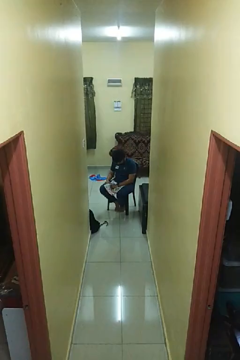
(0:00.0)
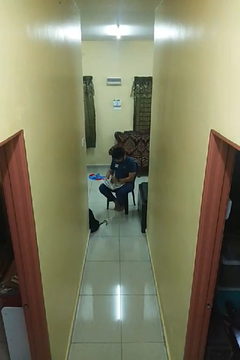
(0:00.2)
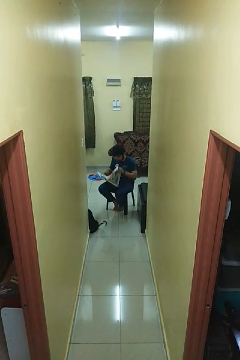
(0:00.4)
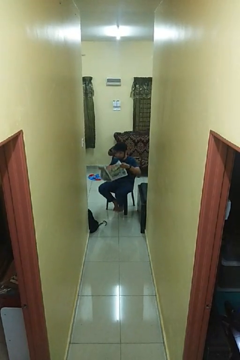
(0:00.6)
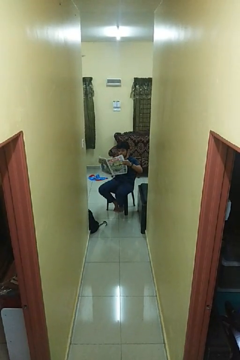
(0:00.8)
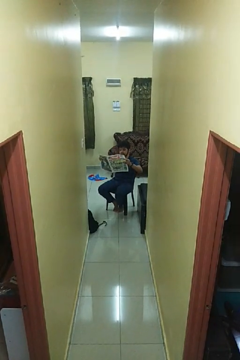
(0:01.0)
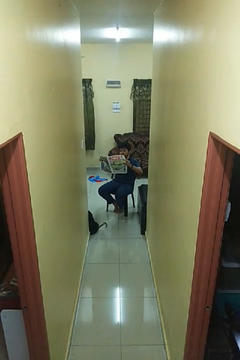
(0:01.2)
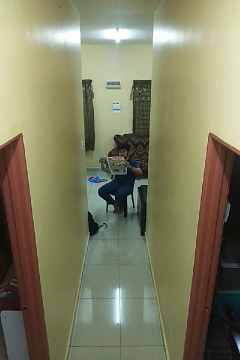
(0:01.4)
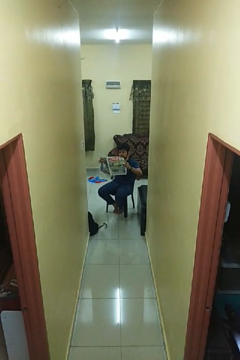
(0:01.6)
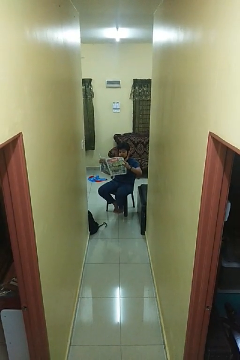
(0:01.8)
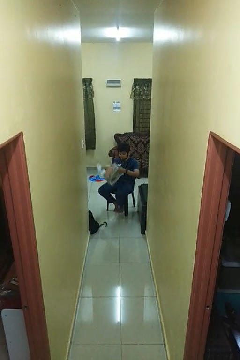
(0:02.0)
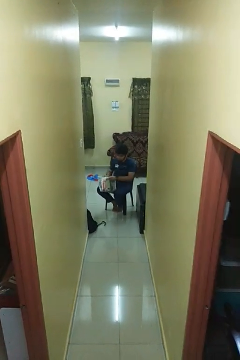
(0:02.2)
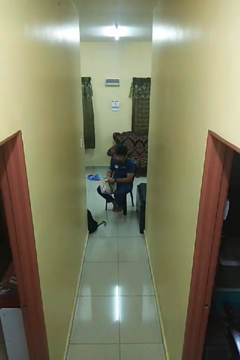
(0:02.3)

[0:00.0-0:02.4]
person reads newspaper

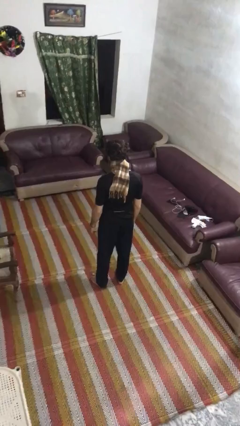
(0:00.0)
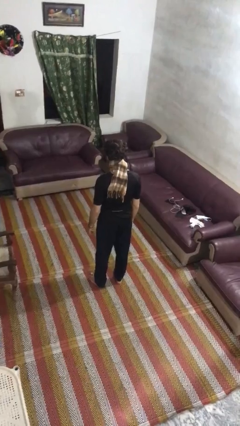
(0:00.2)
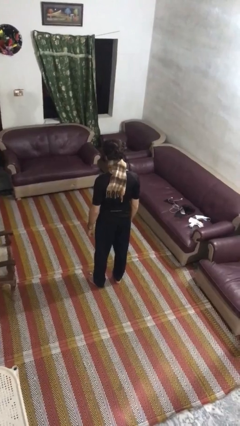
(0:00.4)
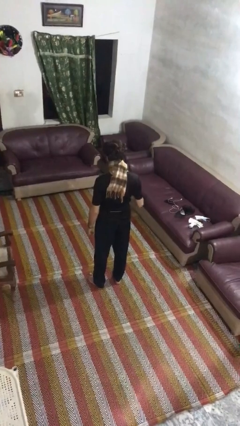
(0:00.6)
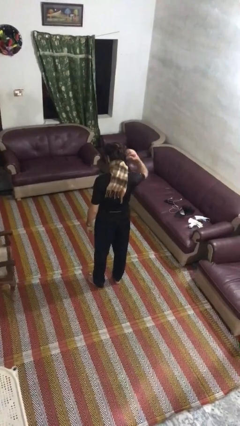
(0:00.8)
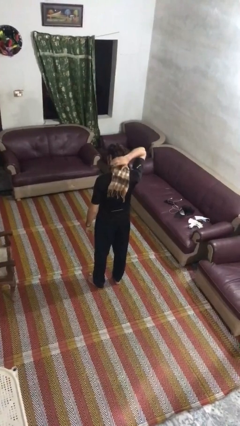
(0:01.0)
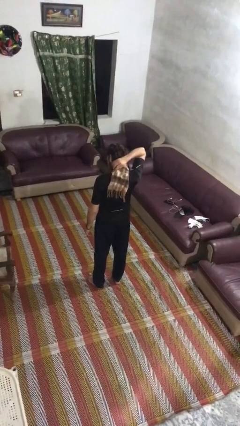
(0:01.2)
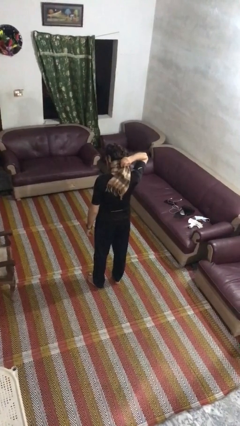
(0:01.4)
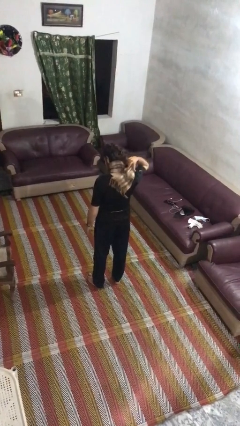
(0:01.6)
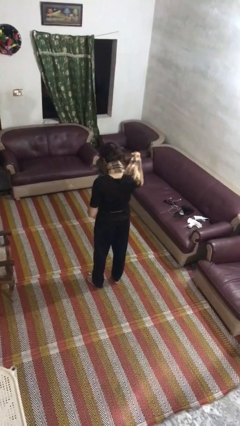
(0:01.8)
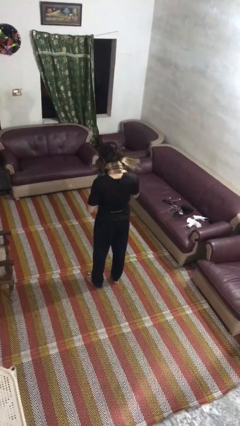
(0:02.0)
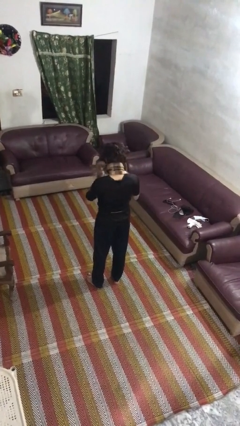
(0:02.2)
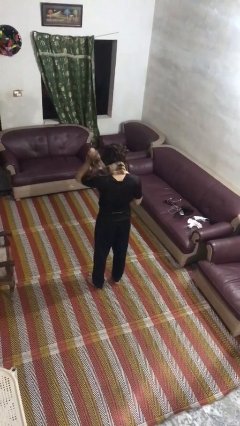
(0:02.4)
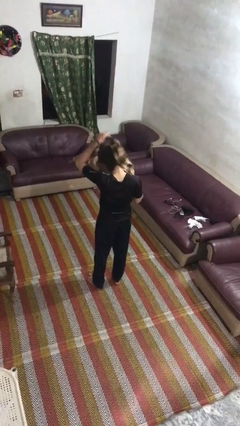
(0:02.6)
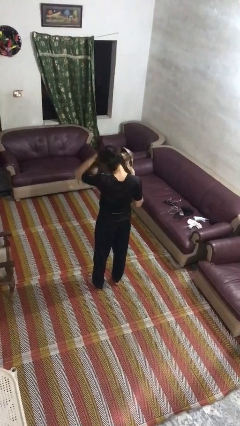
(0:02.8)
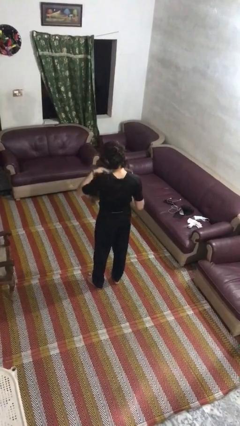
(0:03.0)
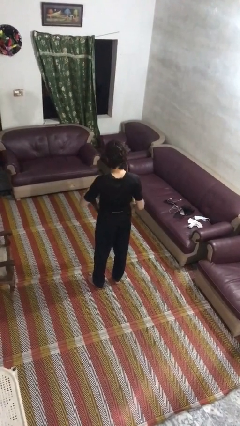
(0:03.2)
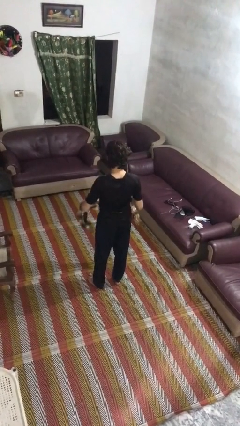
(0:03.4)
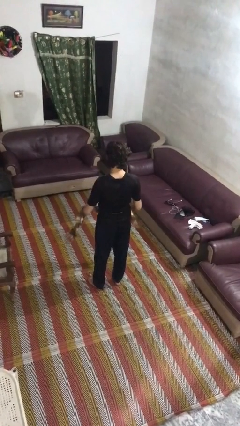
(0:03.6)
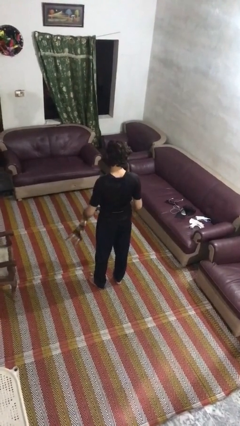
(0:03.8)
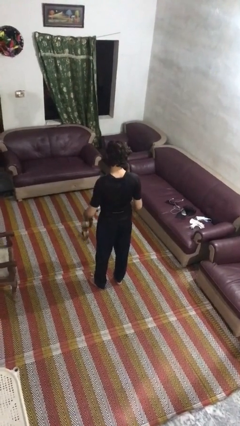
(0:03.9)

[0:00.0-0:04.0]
person takes off scarf

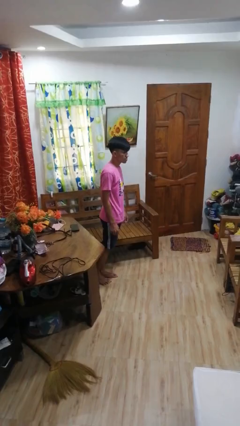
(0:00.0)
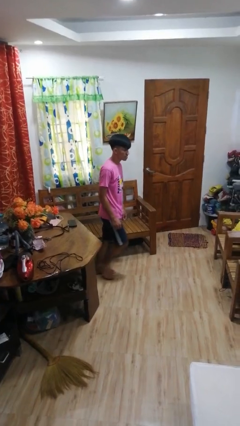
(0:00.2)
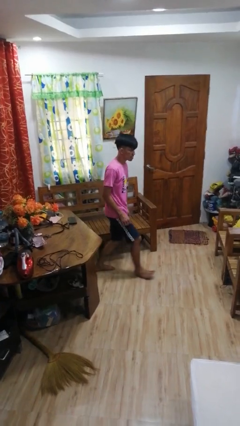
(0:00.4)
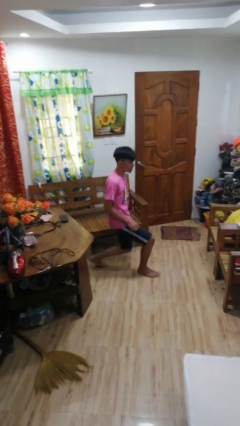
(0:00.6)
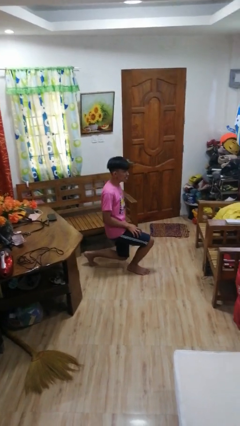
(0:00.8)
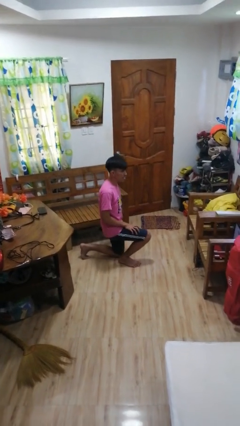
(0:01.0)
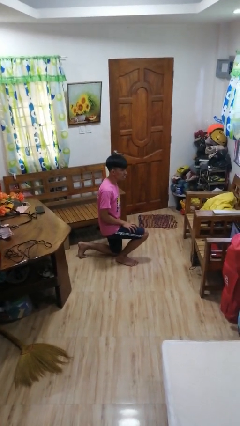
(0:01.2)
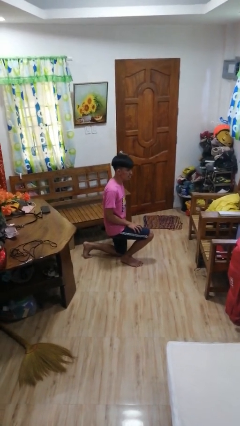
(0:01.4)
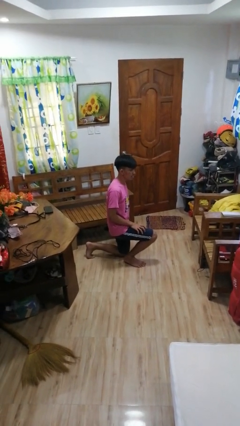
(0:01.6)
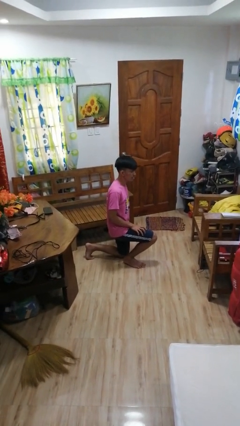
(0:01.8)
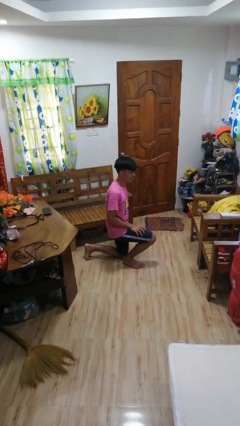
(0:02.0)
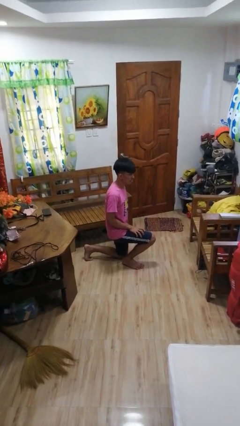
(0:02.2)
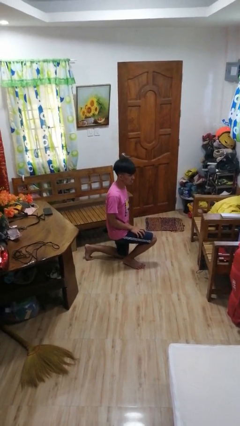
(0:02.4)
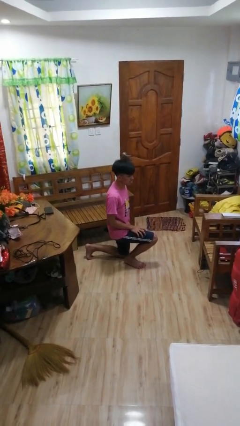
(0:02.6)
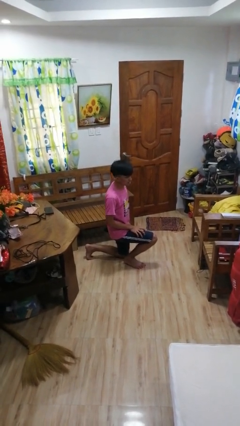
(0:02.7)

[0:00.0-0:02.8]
person kneels

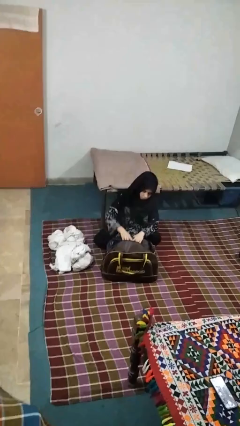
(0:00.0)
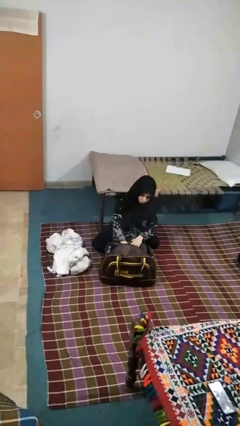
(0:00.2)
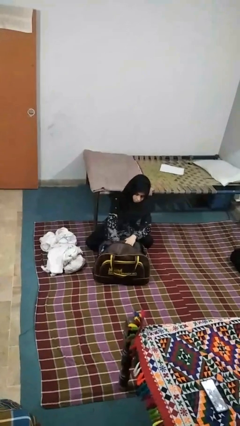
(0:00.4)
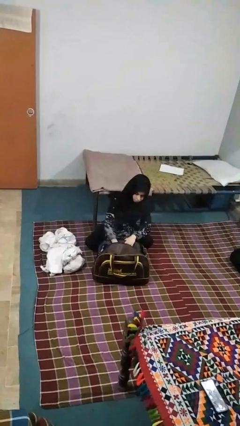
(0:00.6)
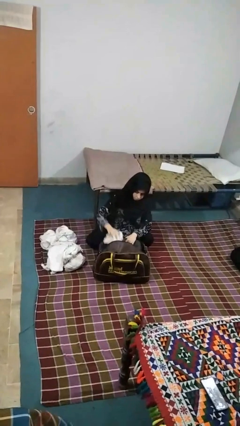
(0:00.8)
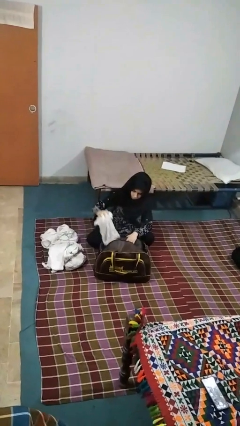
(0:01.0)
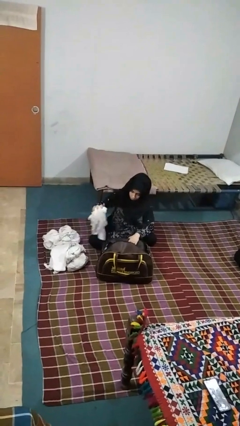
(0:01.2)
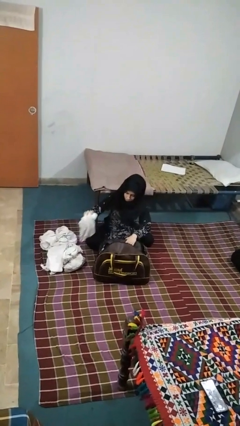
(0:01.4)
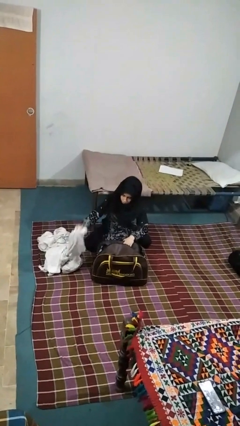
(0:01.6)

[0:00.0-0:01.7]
person unloads clothes from suitcase

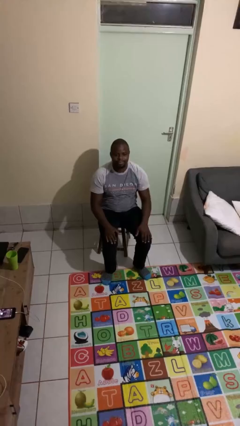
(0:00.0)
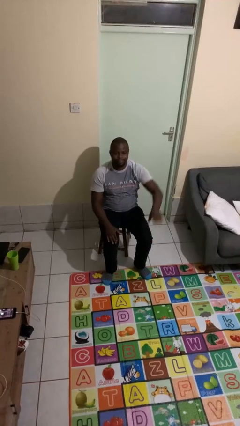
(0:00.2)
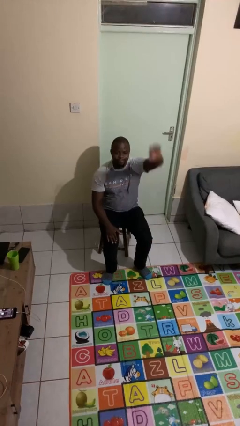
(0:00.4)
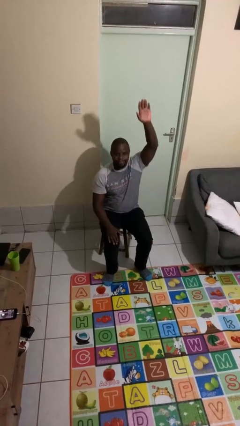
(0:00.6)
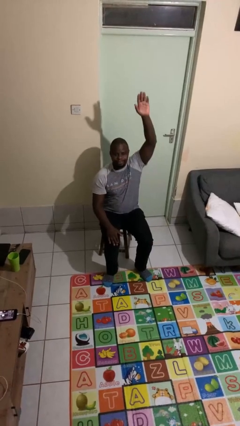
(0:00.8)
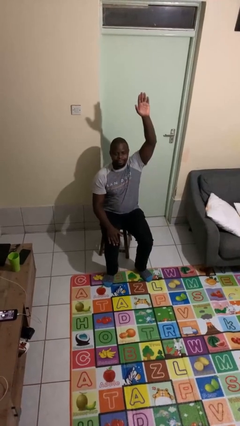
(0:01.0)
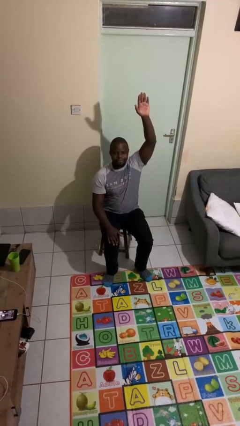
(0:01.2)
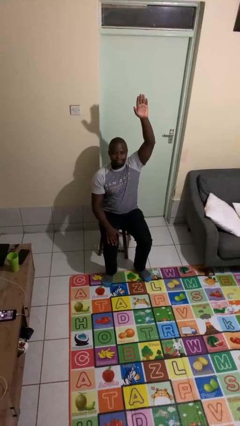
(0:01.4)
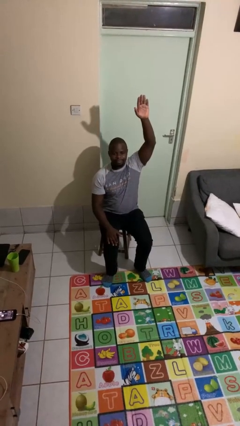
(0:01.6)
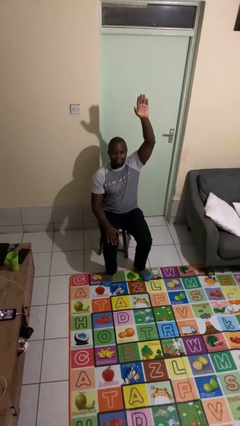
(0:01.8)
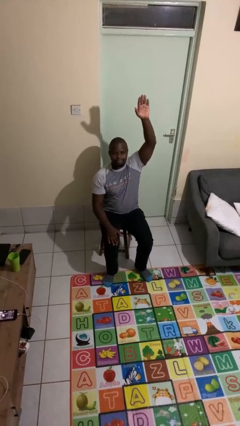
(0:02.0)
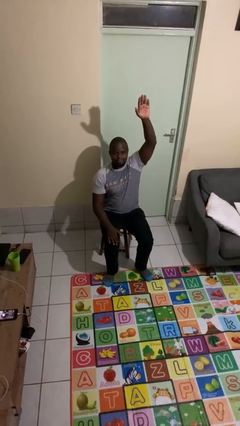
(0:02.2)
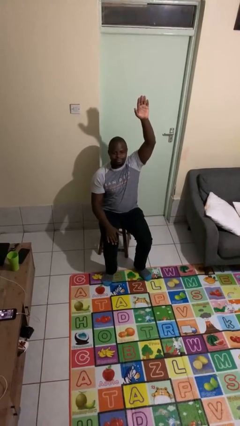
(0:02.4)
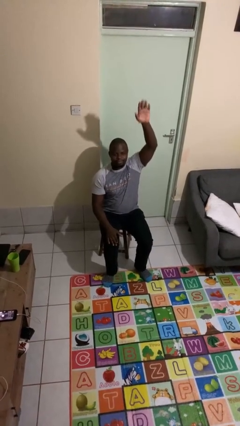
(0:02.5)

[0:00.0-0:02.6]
person gestures raise hand

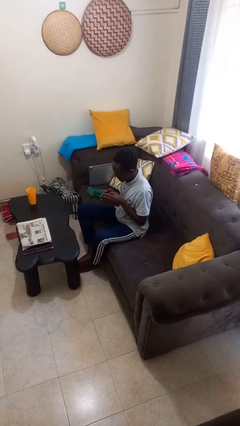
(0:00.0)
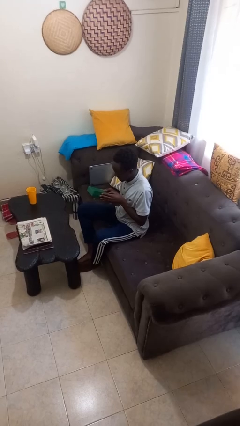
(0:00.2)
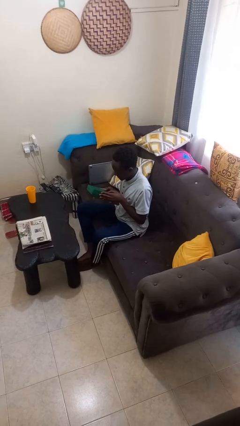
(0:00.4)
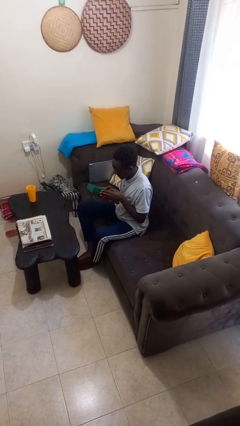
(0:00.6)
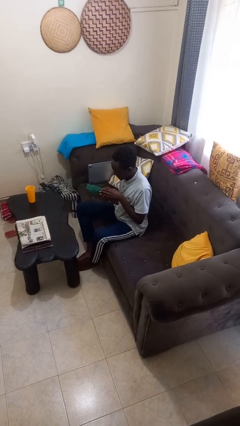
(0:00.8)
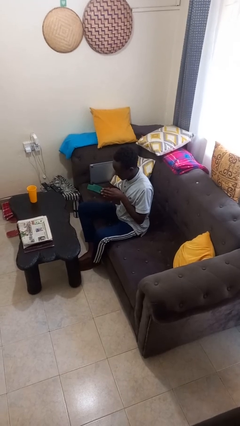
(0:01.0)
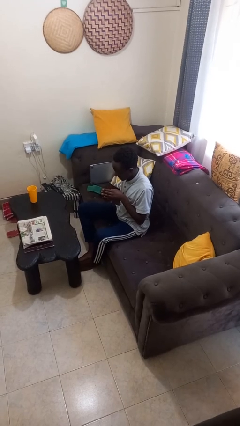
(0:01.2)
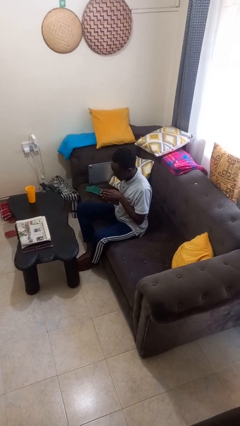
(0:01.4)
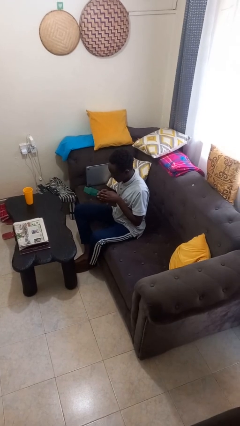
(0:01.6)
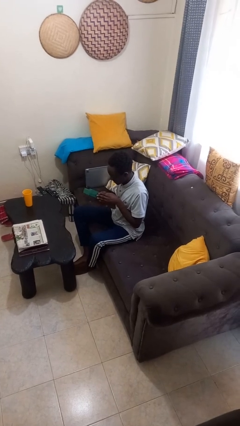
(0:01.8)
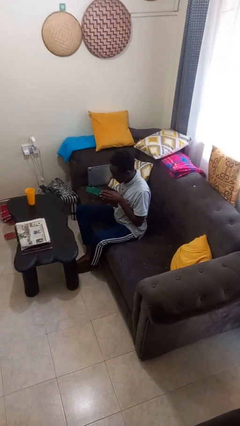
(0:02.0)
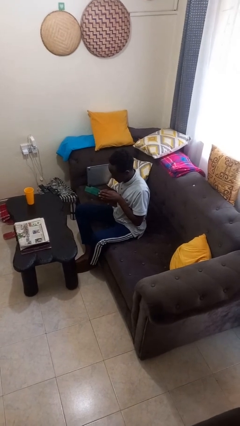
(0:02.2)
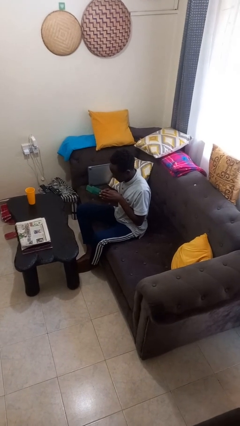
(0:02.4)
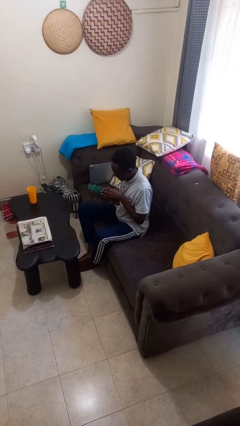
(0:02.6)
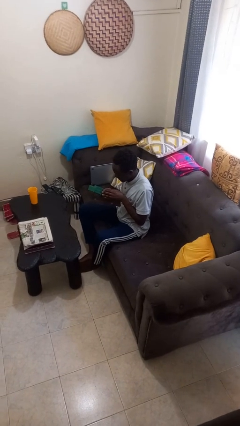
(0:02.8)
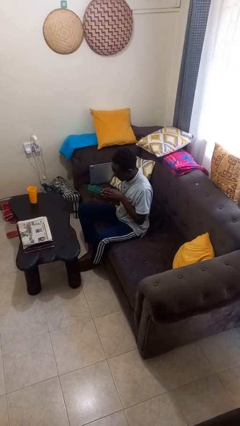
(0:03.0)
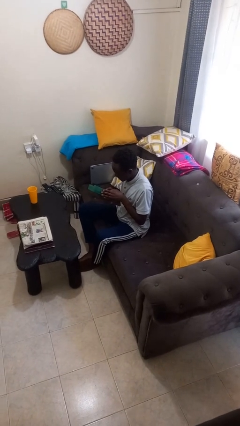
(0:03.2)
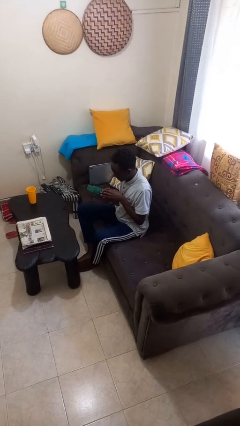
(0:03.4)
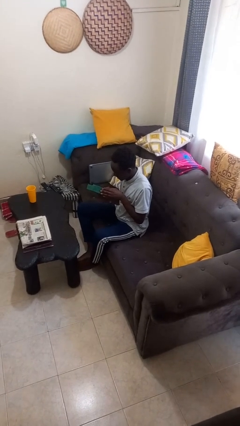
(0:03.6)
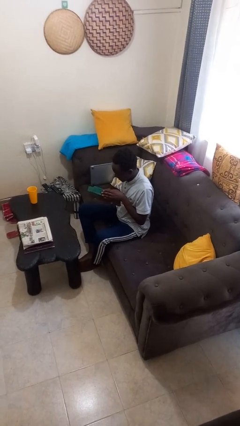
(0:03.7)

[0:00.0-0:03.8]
person interacts with handheld game

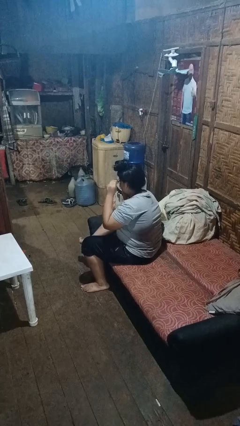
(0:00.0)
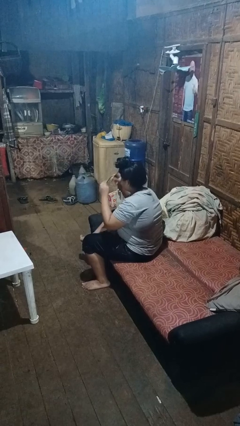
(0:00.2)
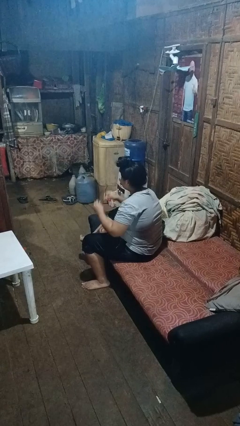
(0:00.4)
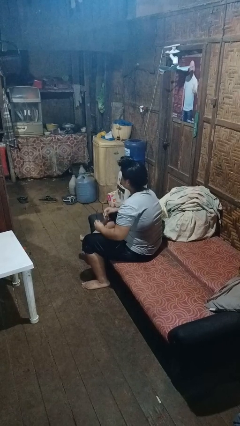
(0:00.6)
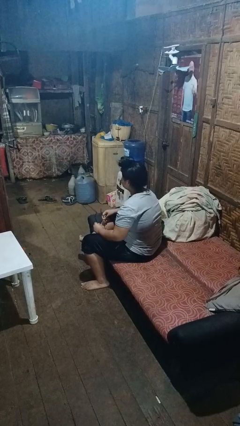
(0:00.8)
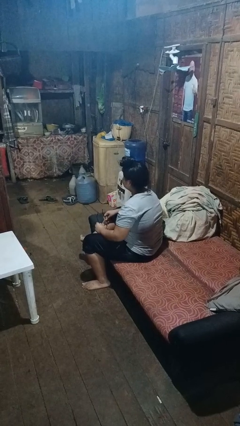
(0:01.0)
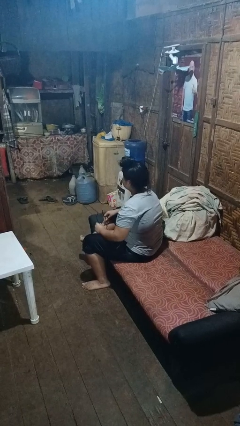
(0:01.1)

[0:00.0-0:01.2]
person takes off glasses
